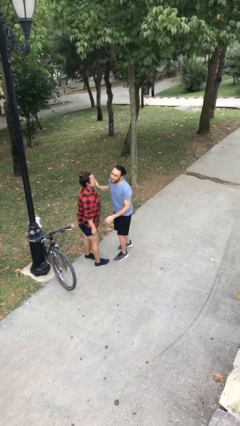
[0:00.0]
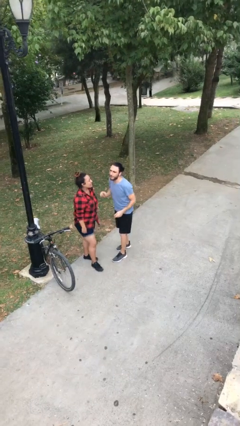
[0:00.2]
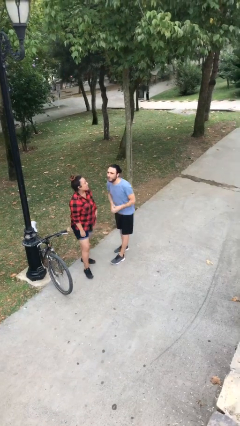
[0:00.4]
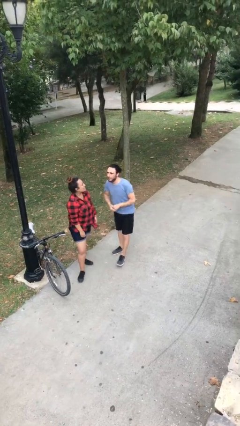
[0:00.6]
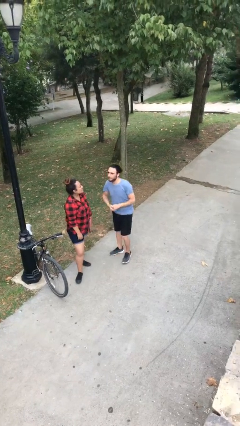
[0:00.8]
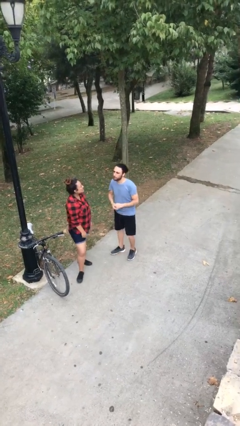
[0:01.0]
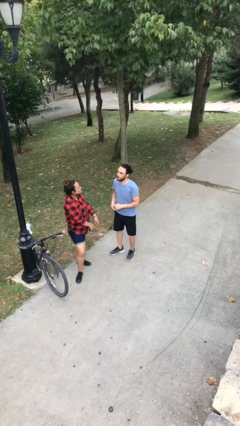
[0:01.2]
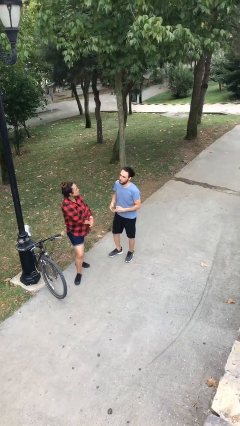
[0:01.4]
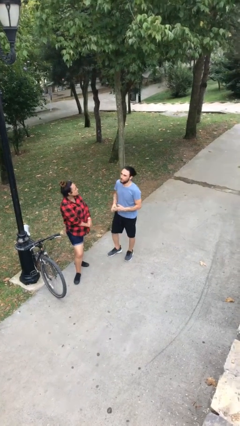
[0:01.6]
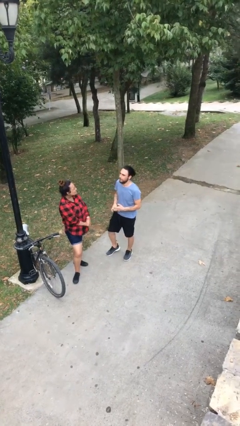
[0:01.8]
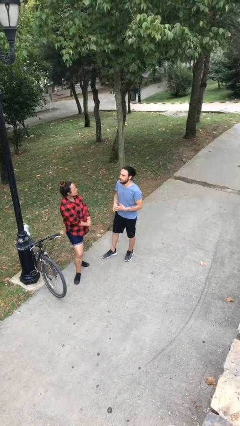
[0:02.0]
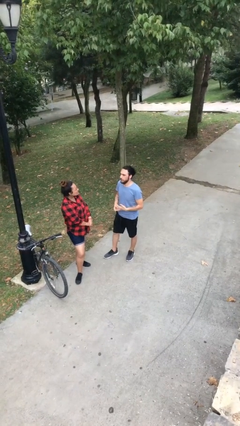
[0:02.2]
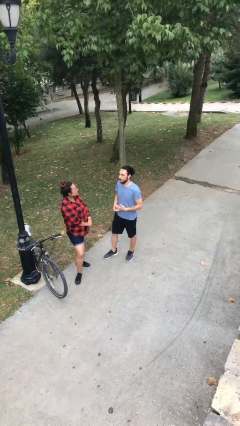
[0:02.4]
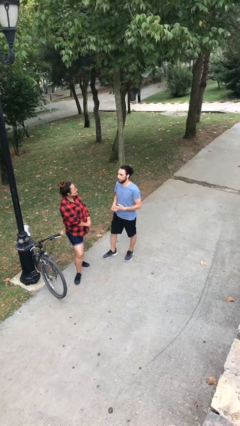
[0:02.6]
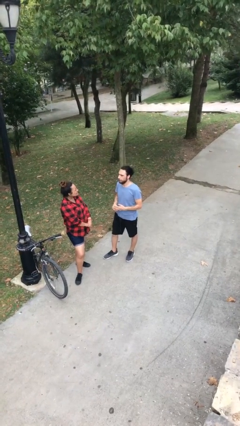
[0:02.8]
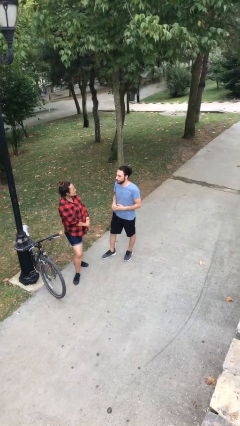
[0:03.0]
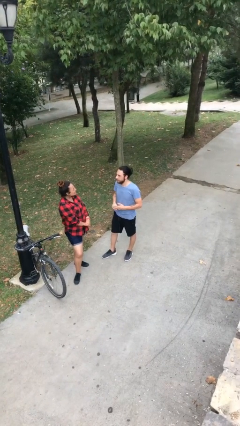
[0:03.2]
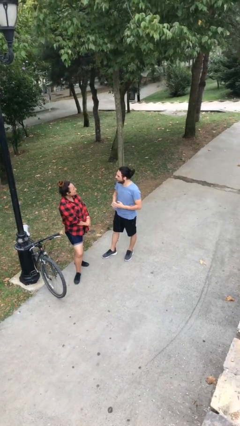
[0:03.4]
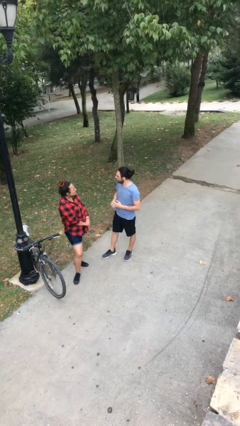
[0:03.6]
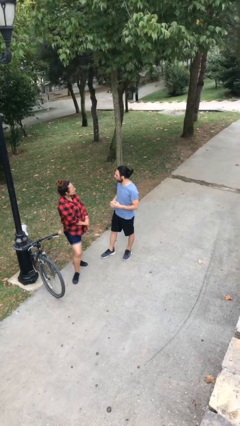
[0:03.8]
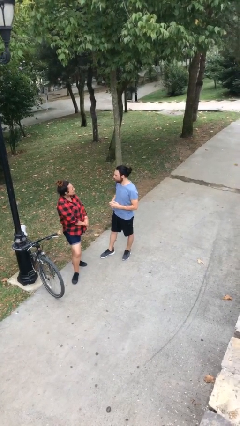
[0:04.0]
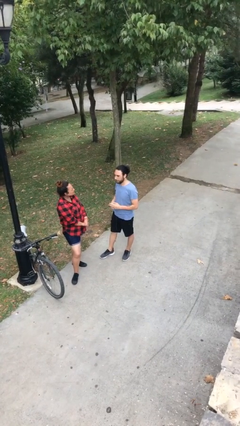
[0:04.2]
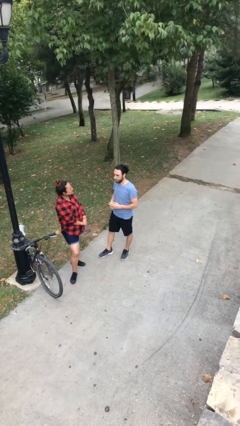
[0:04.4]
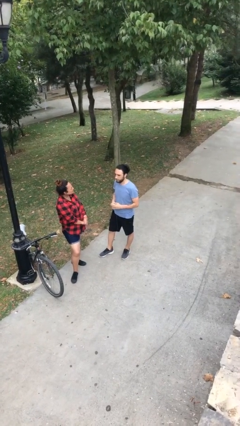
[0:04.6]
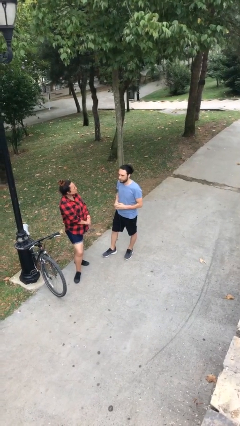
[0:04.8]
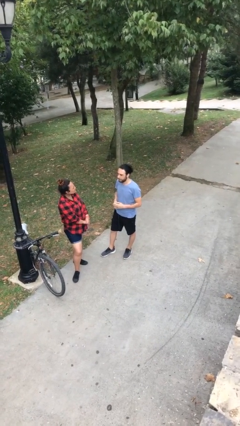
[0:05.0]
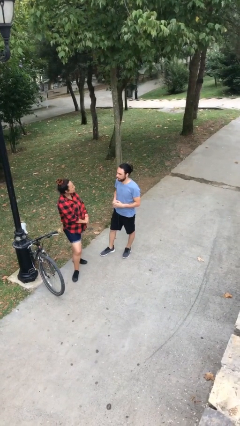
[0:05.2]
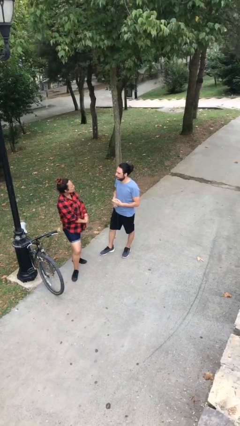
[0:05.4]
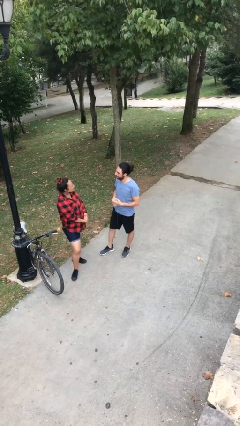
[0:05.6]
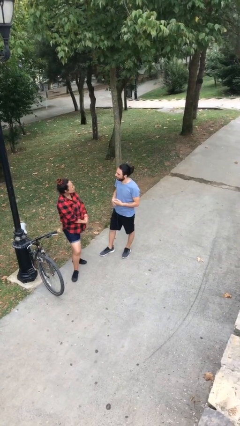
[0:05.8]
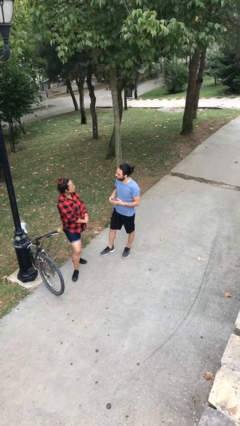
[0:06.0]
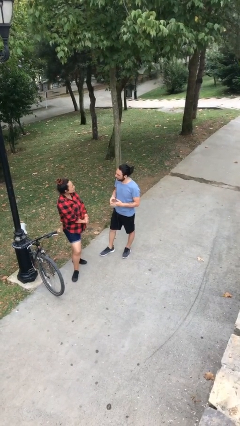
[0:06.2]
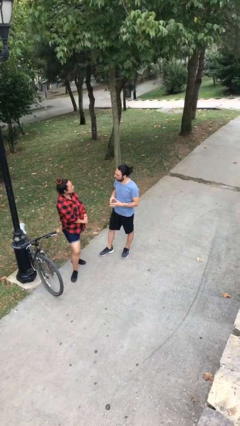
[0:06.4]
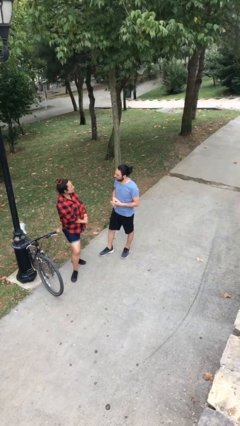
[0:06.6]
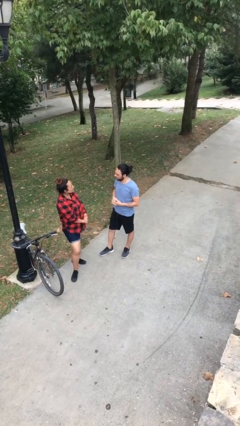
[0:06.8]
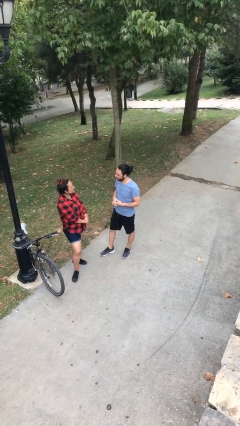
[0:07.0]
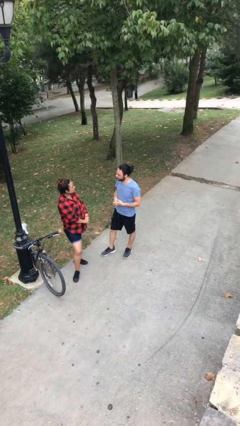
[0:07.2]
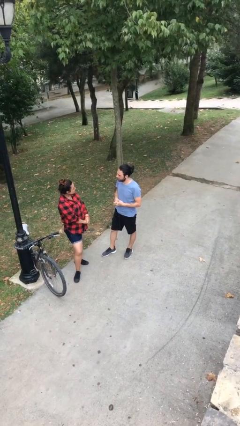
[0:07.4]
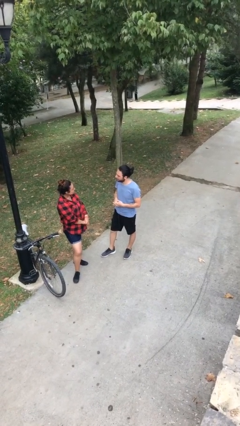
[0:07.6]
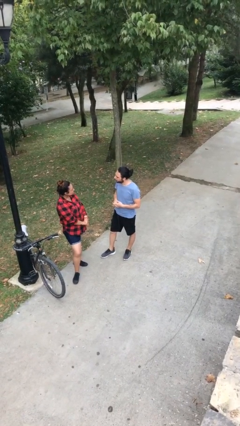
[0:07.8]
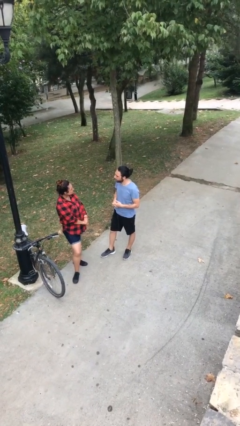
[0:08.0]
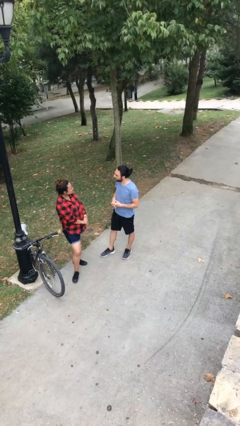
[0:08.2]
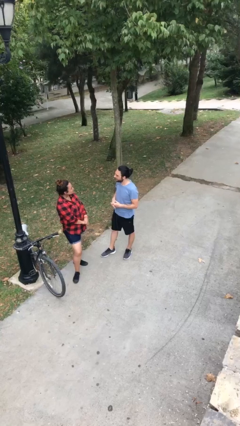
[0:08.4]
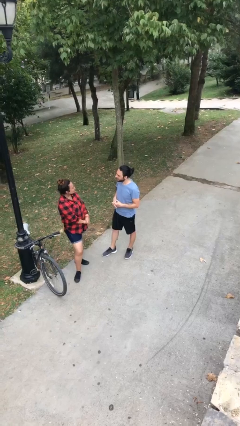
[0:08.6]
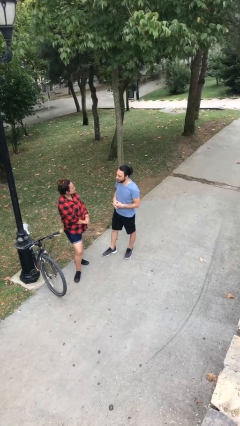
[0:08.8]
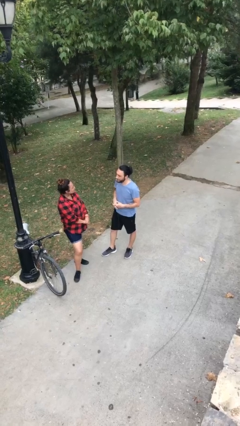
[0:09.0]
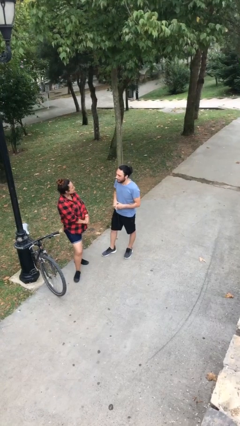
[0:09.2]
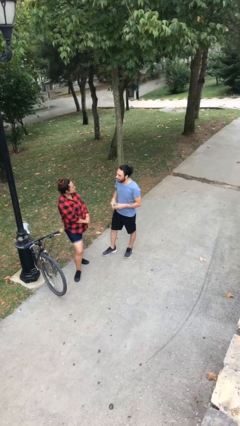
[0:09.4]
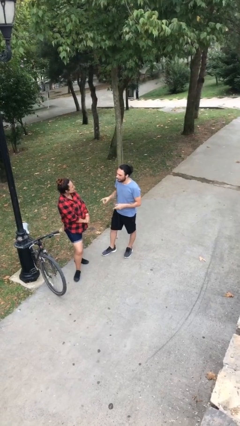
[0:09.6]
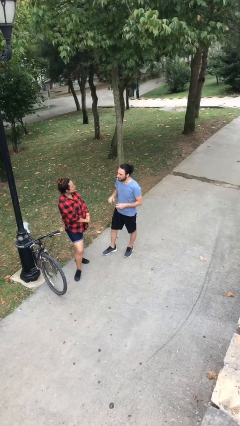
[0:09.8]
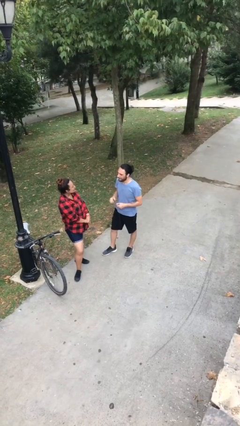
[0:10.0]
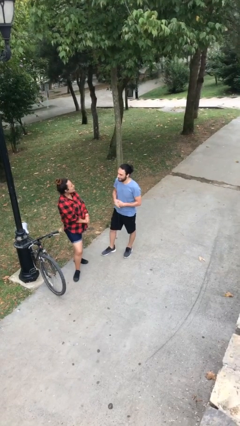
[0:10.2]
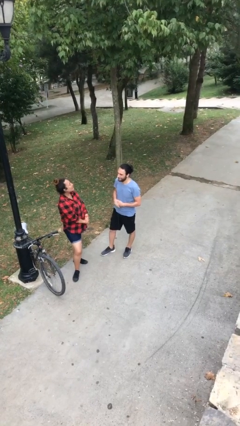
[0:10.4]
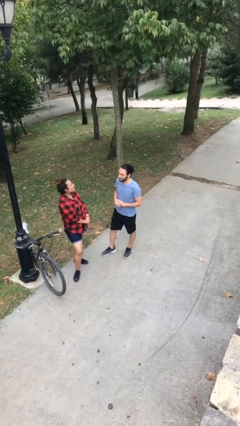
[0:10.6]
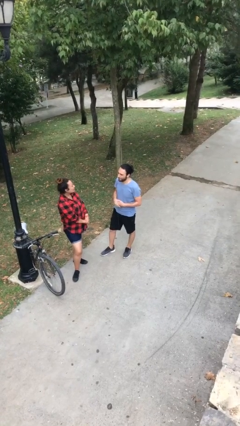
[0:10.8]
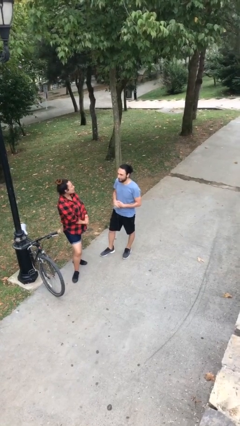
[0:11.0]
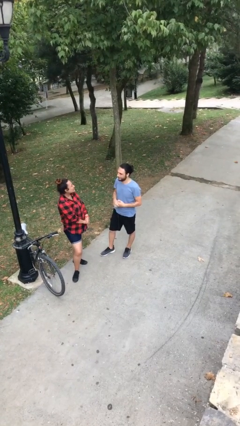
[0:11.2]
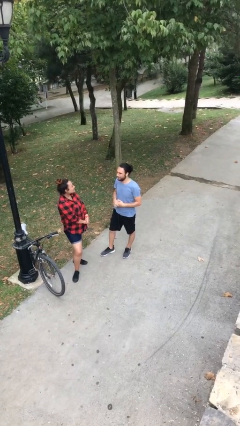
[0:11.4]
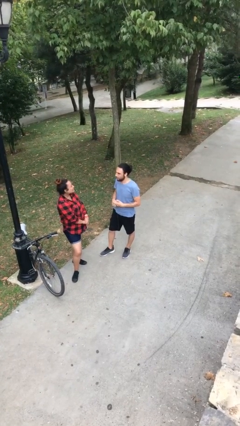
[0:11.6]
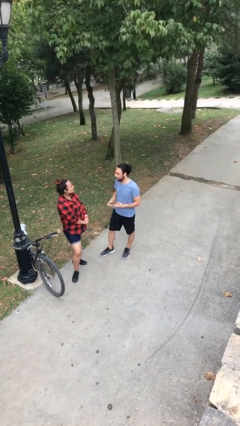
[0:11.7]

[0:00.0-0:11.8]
person talks to person

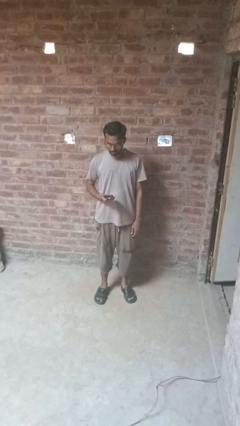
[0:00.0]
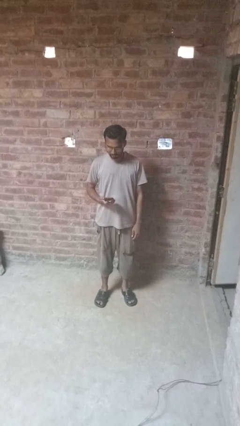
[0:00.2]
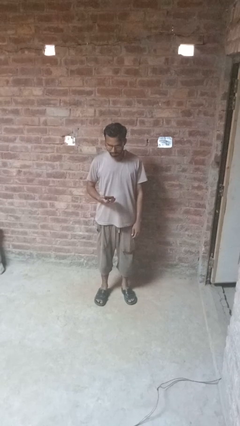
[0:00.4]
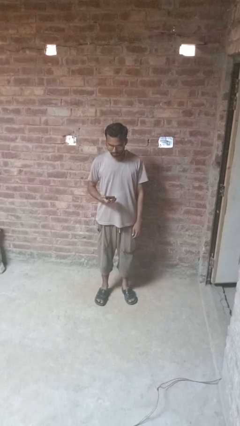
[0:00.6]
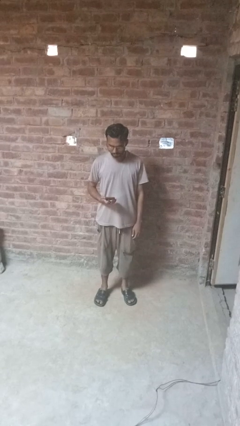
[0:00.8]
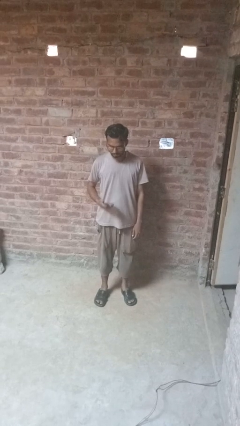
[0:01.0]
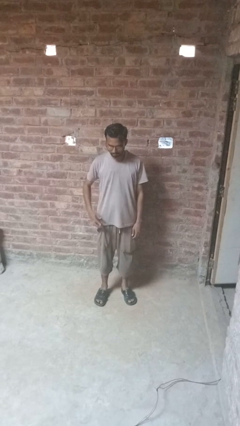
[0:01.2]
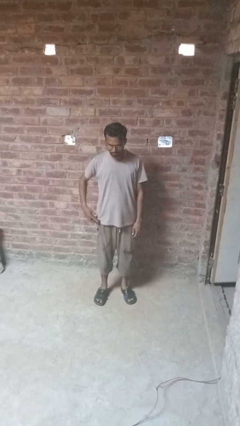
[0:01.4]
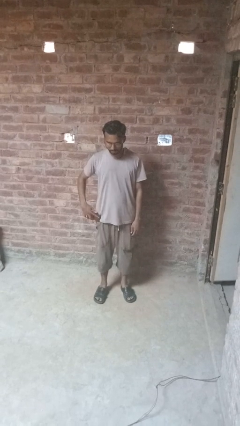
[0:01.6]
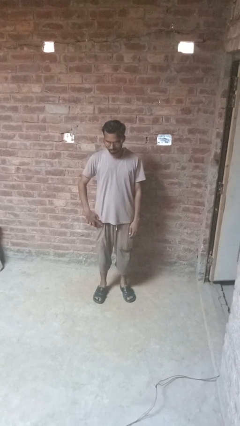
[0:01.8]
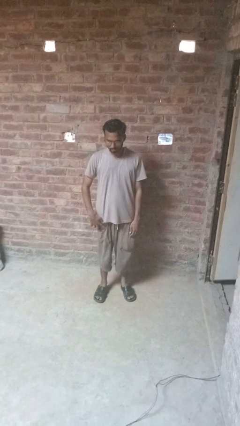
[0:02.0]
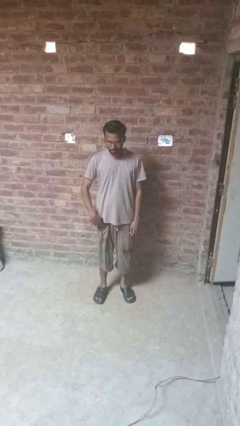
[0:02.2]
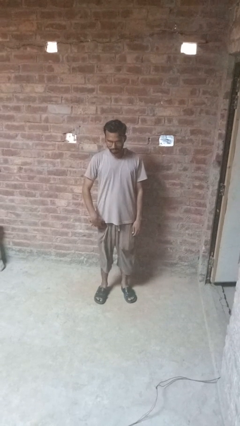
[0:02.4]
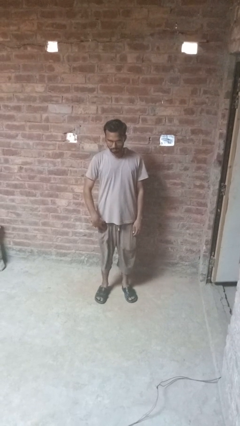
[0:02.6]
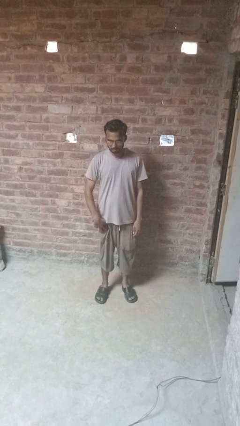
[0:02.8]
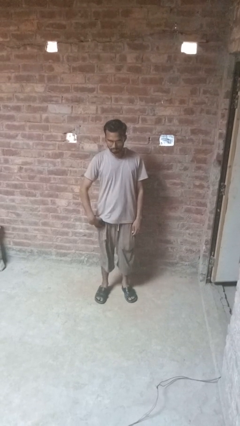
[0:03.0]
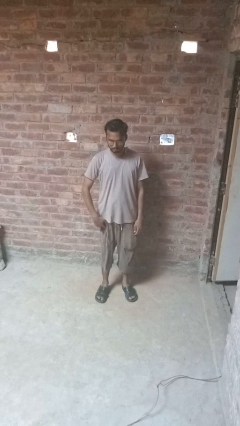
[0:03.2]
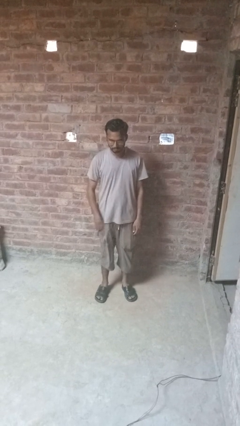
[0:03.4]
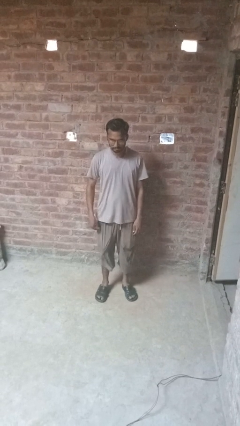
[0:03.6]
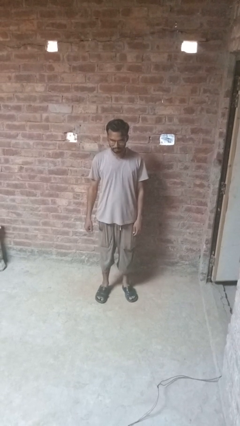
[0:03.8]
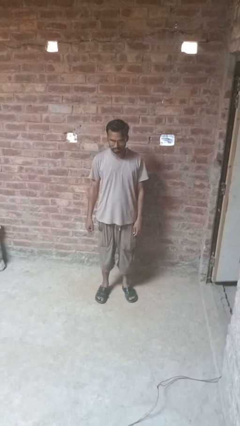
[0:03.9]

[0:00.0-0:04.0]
person puts phone into pocket

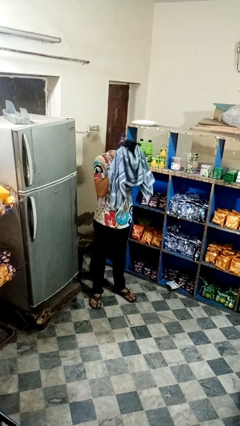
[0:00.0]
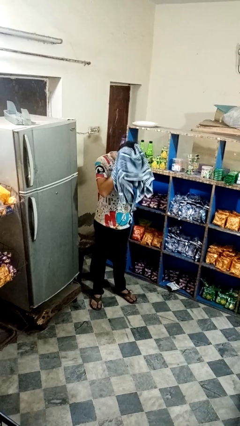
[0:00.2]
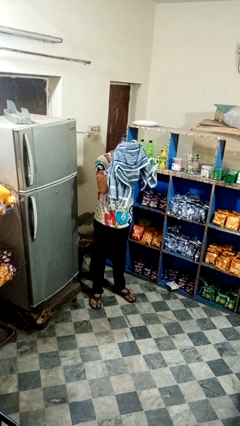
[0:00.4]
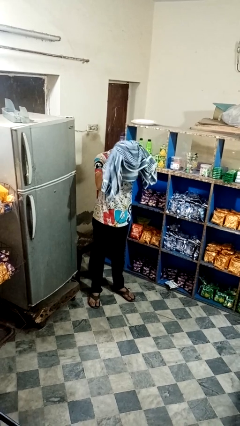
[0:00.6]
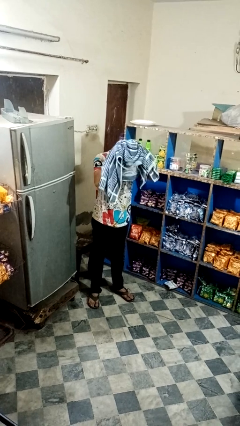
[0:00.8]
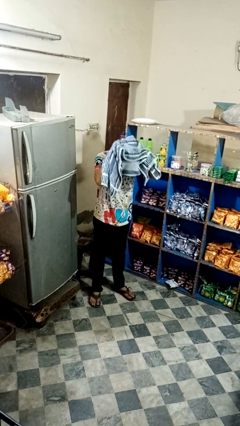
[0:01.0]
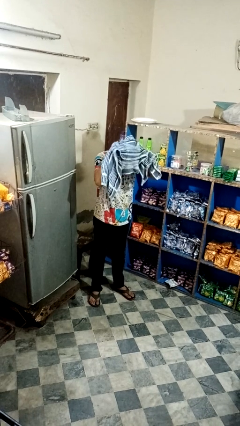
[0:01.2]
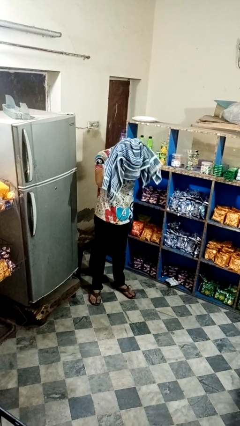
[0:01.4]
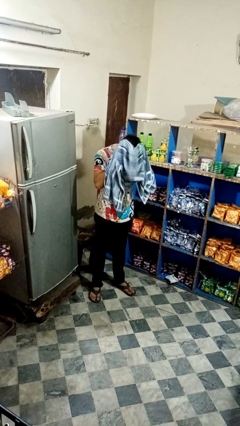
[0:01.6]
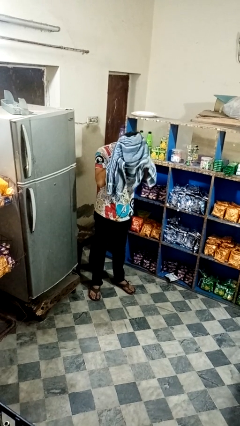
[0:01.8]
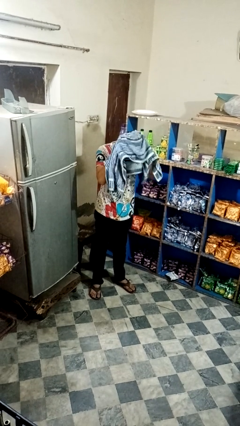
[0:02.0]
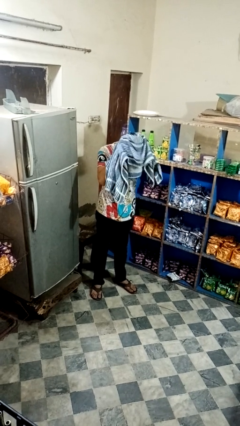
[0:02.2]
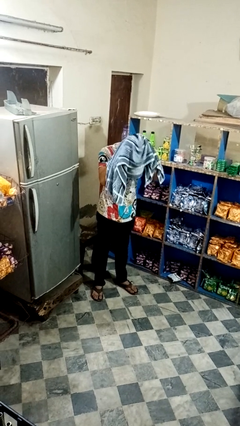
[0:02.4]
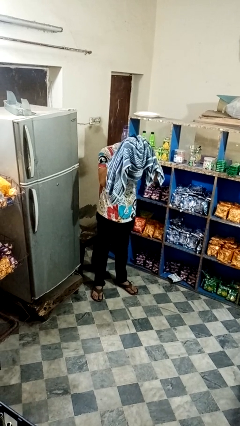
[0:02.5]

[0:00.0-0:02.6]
person dries hair with towel
